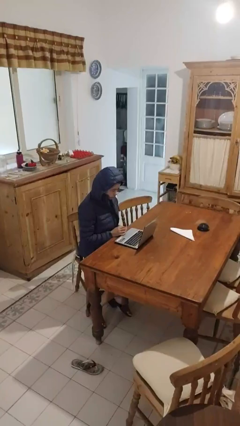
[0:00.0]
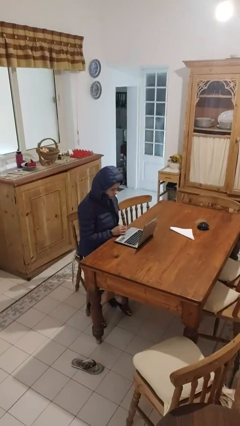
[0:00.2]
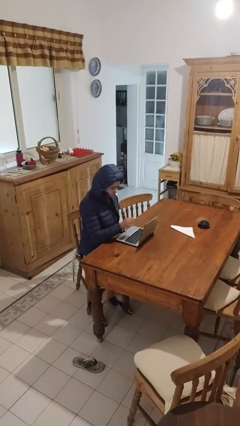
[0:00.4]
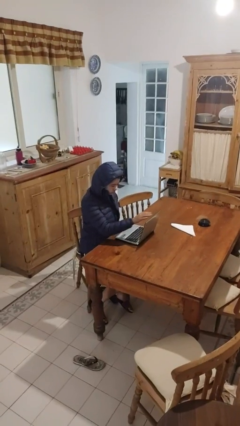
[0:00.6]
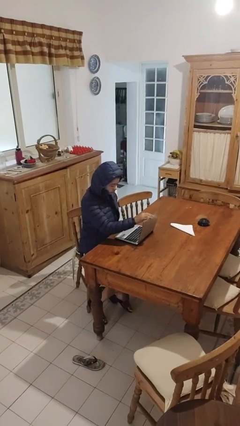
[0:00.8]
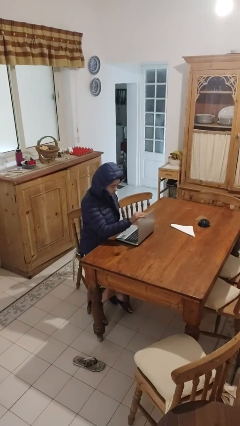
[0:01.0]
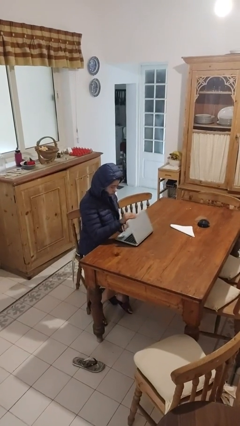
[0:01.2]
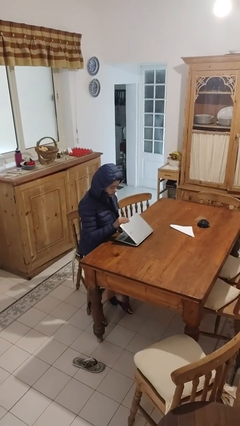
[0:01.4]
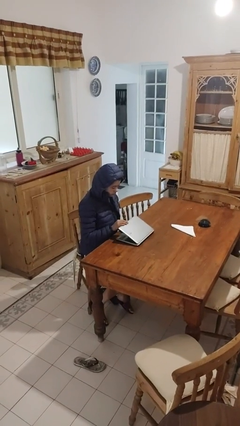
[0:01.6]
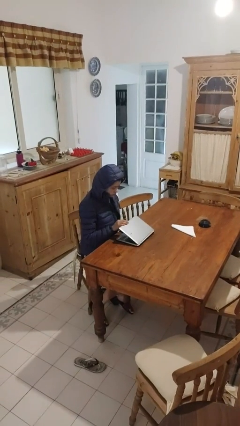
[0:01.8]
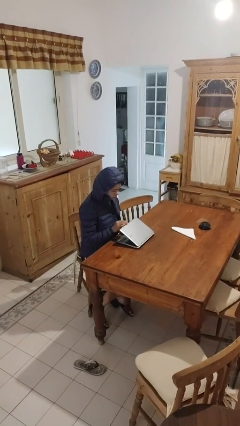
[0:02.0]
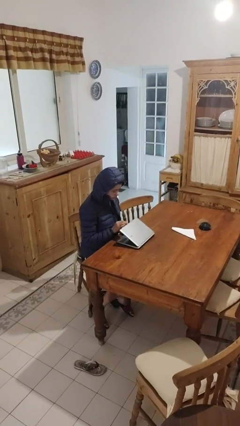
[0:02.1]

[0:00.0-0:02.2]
person closes laptop

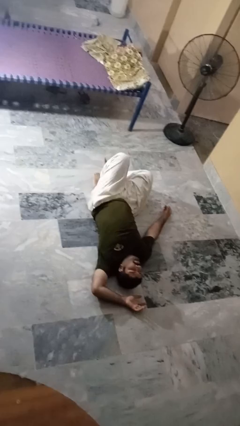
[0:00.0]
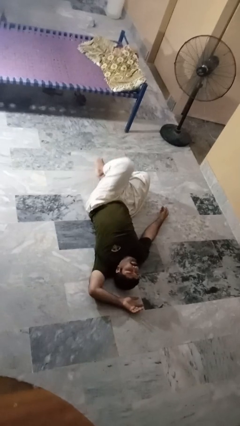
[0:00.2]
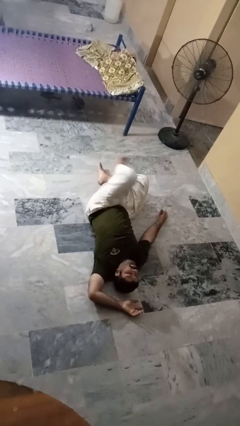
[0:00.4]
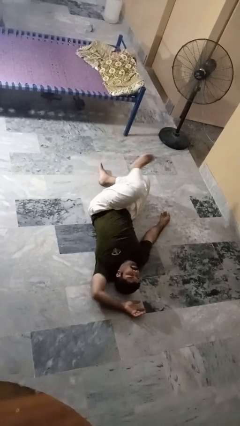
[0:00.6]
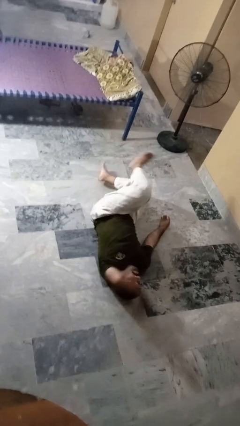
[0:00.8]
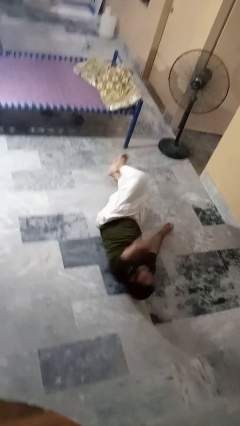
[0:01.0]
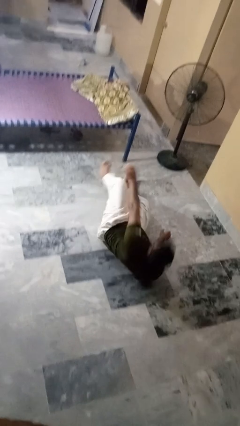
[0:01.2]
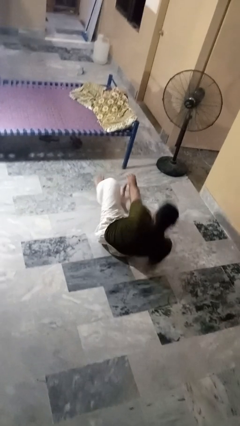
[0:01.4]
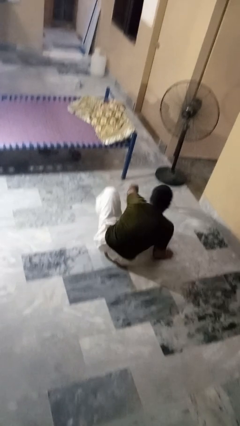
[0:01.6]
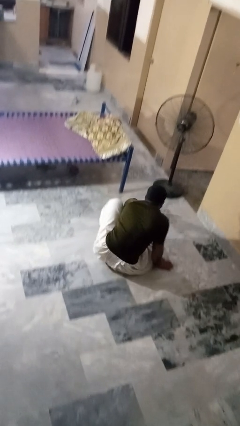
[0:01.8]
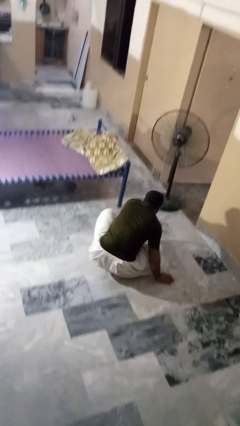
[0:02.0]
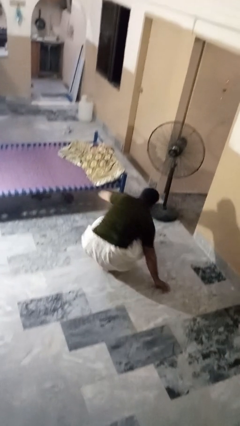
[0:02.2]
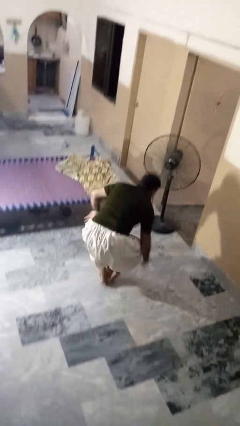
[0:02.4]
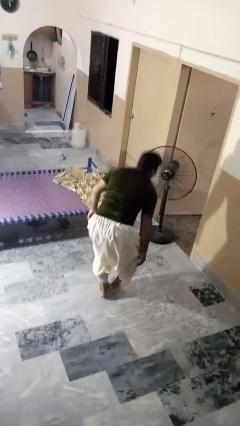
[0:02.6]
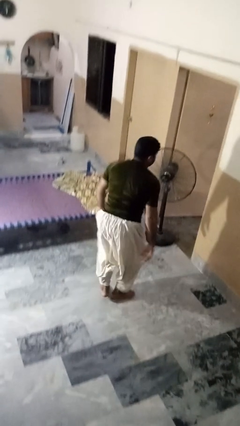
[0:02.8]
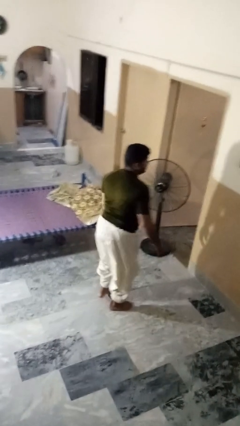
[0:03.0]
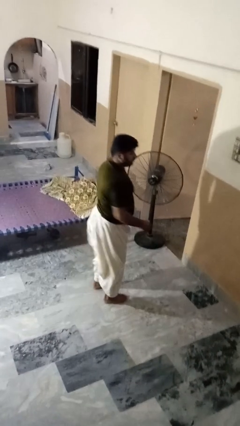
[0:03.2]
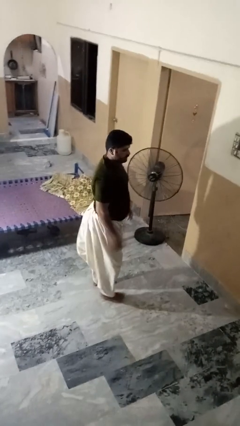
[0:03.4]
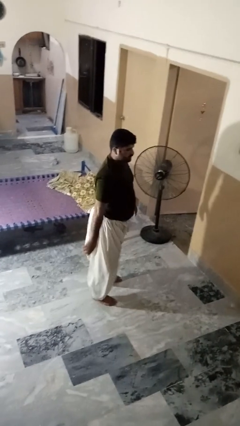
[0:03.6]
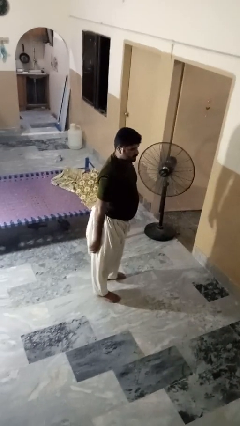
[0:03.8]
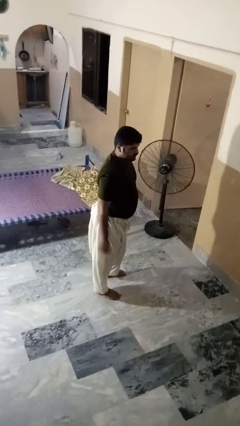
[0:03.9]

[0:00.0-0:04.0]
person stands up from floor

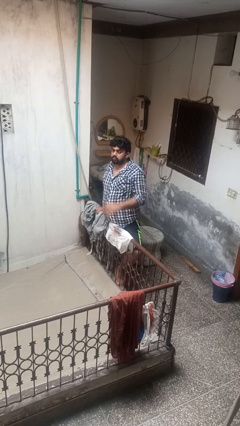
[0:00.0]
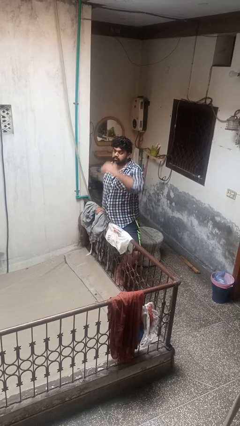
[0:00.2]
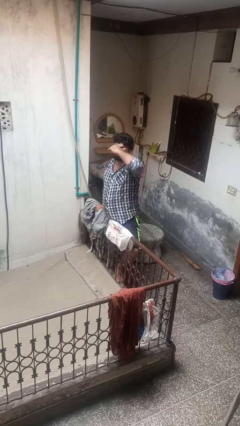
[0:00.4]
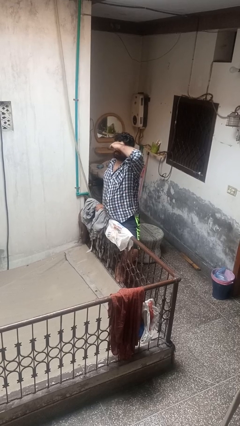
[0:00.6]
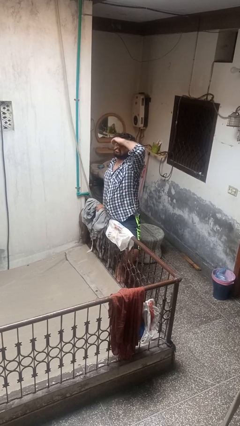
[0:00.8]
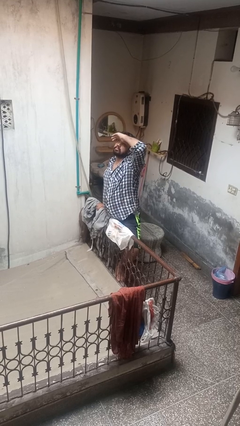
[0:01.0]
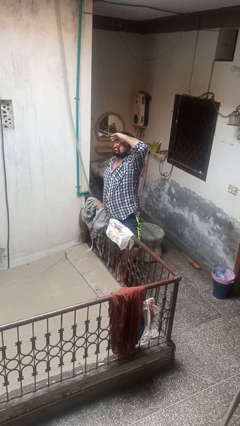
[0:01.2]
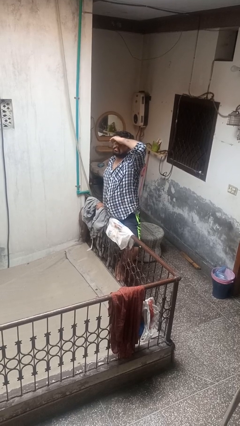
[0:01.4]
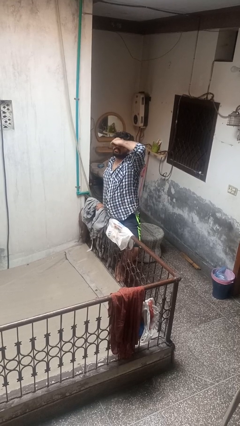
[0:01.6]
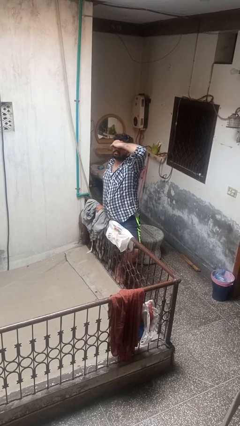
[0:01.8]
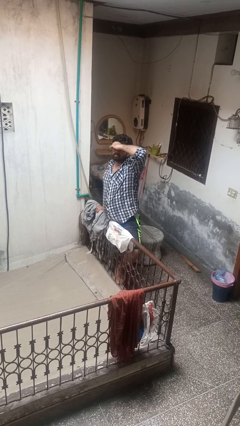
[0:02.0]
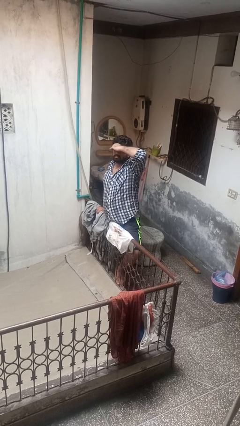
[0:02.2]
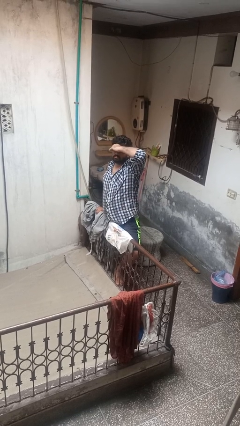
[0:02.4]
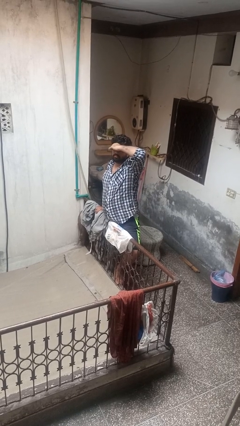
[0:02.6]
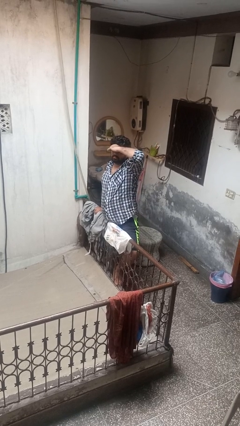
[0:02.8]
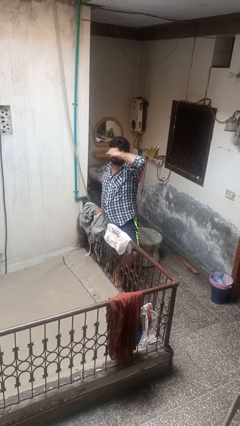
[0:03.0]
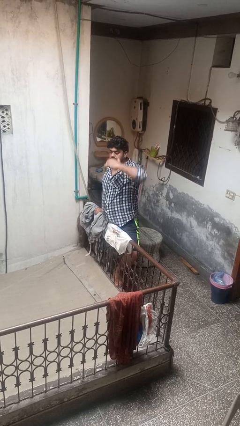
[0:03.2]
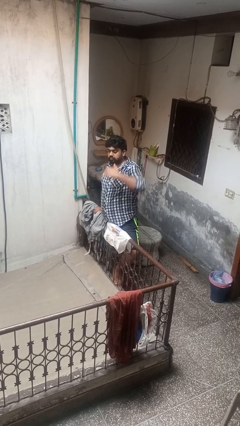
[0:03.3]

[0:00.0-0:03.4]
person shades eyes

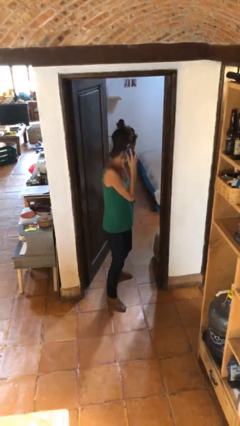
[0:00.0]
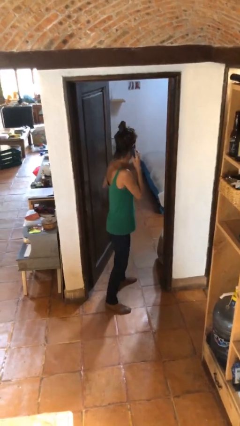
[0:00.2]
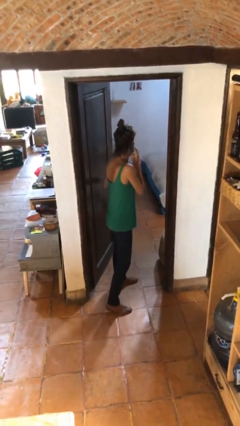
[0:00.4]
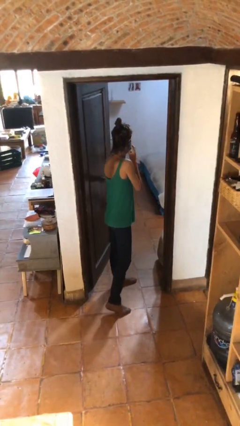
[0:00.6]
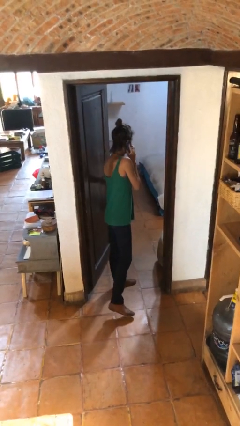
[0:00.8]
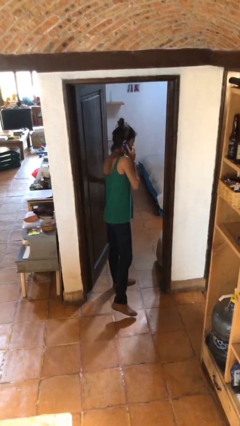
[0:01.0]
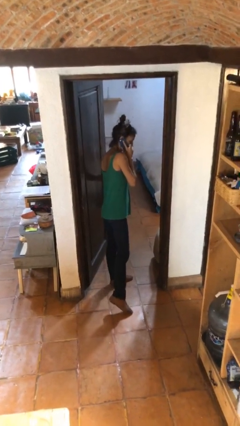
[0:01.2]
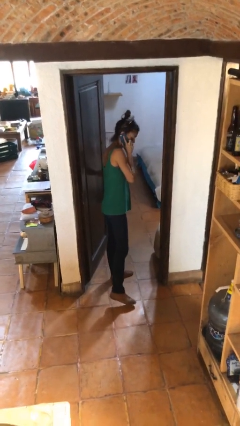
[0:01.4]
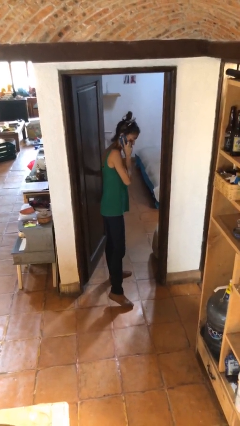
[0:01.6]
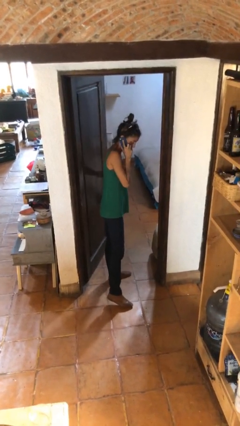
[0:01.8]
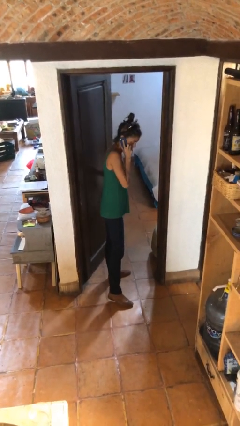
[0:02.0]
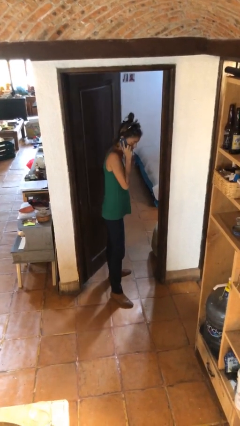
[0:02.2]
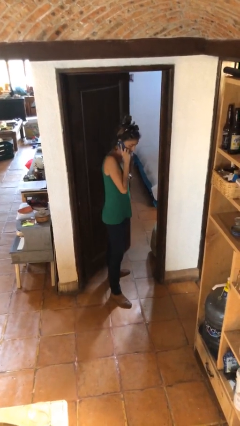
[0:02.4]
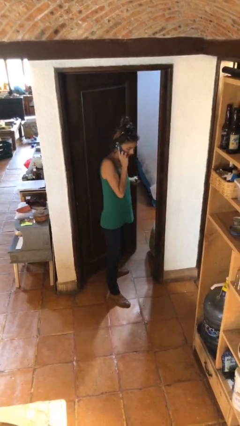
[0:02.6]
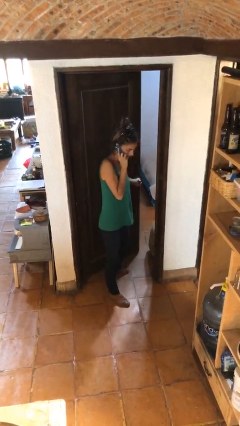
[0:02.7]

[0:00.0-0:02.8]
person closes facility door

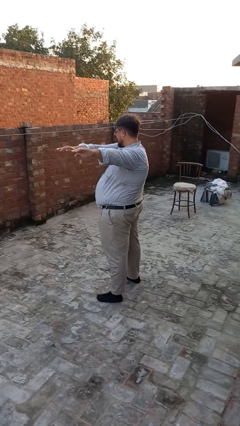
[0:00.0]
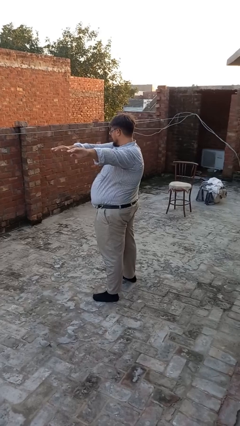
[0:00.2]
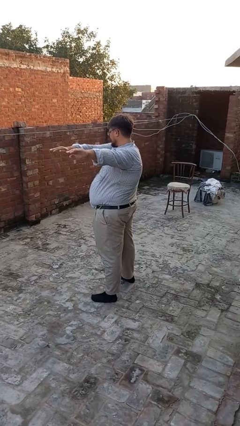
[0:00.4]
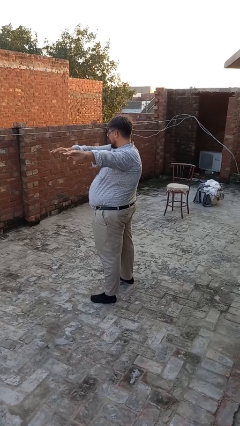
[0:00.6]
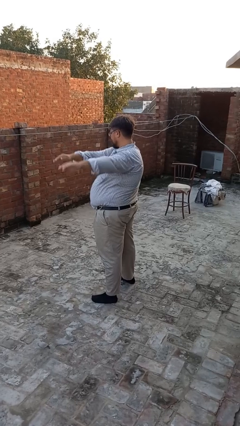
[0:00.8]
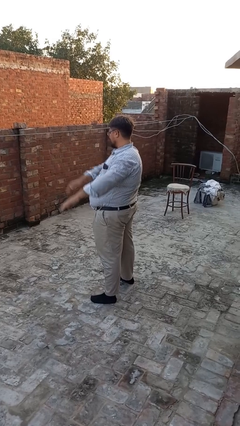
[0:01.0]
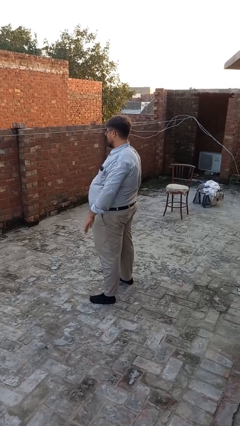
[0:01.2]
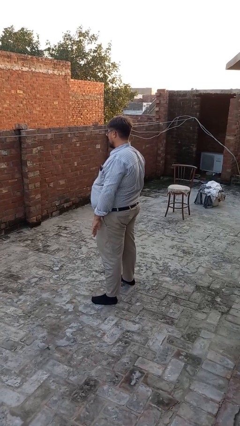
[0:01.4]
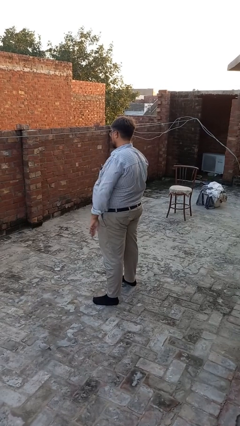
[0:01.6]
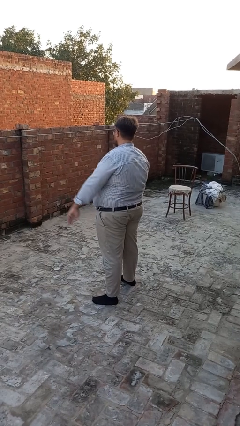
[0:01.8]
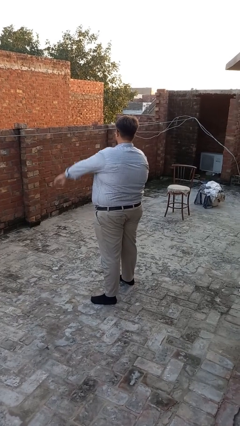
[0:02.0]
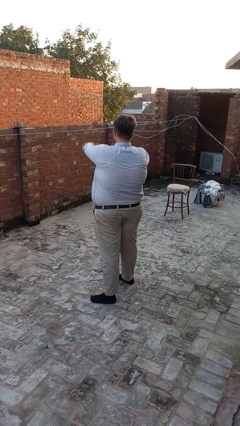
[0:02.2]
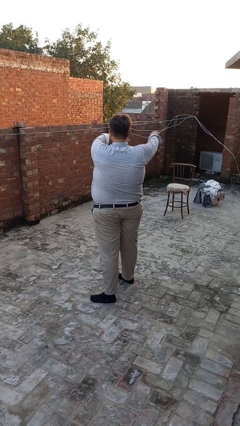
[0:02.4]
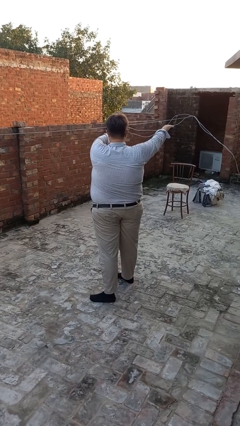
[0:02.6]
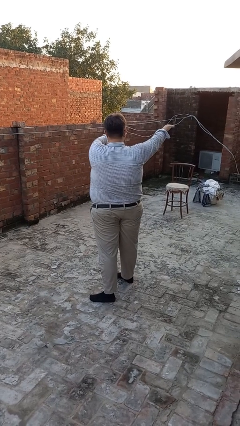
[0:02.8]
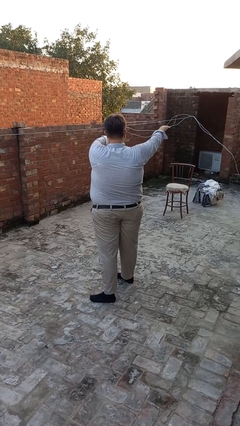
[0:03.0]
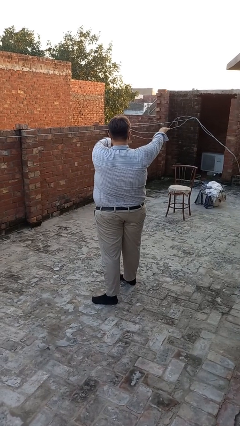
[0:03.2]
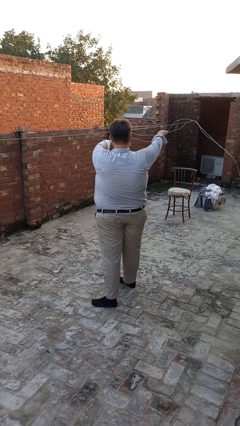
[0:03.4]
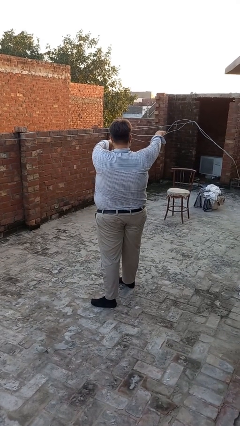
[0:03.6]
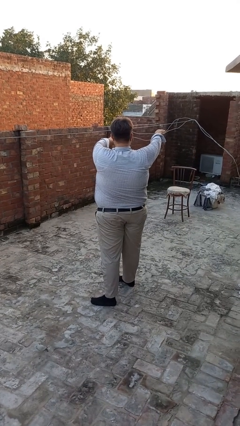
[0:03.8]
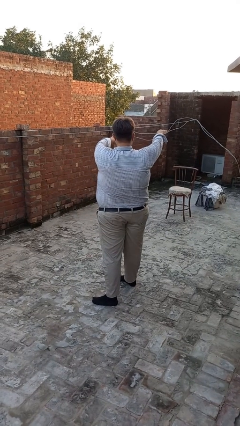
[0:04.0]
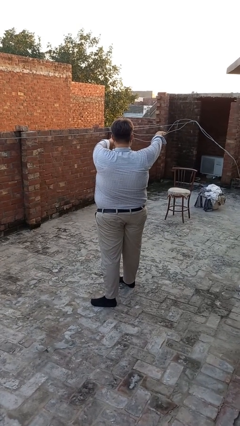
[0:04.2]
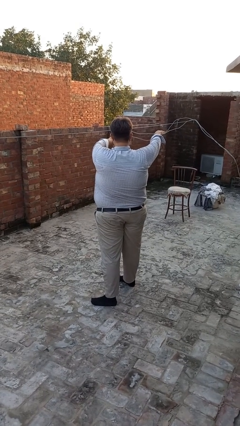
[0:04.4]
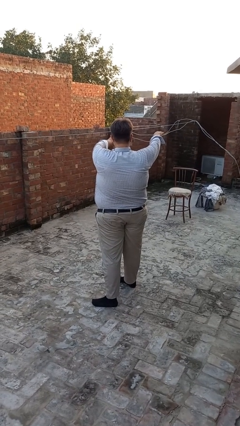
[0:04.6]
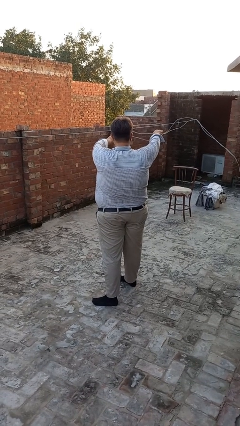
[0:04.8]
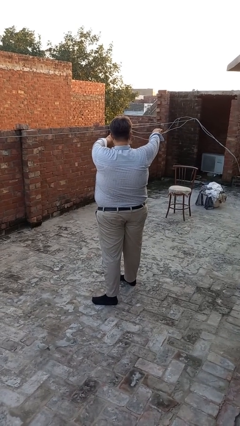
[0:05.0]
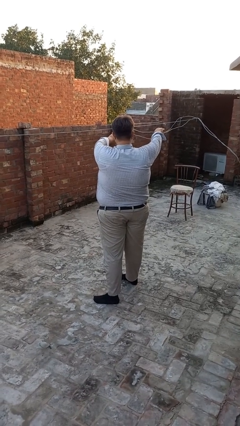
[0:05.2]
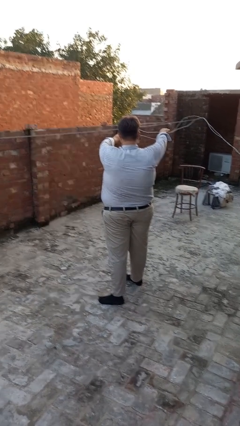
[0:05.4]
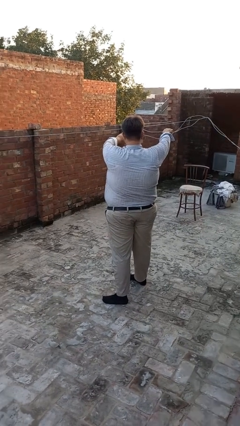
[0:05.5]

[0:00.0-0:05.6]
person gestures swipe right
